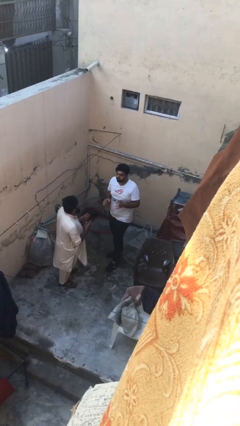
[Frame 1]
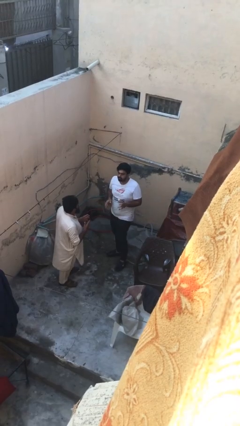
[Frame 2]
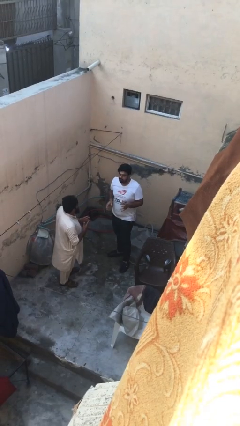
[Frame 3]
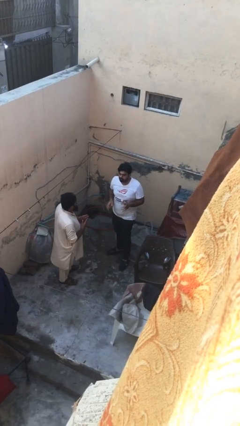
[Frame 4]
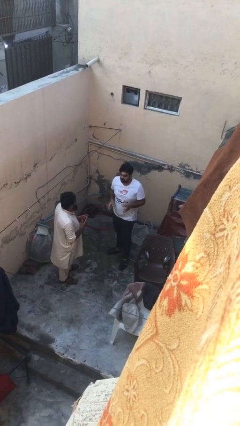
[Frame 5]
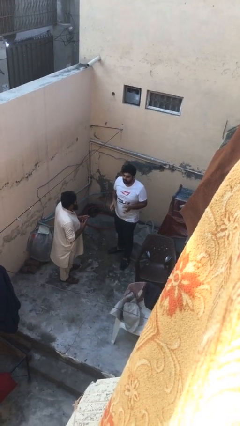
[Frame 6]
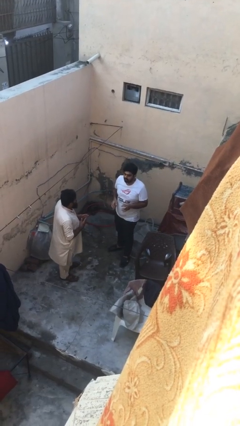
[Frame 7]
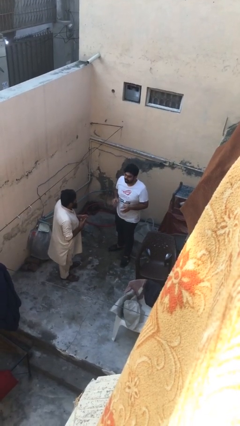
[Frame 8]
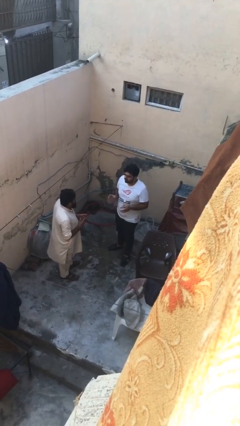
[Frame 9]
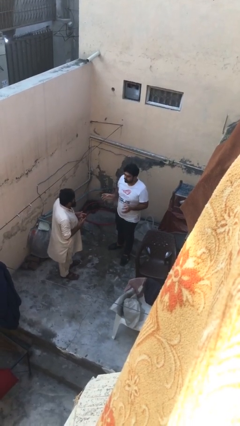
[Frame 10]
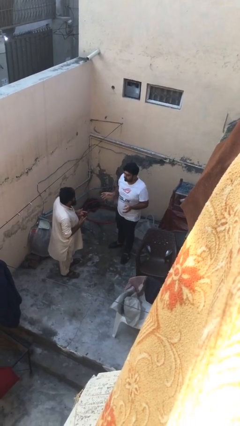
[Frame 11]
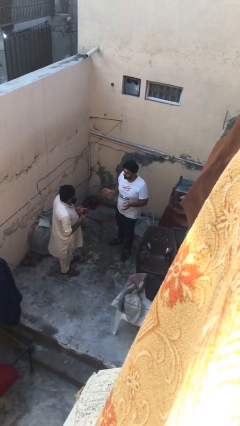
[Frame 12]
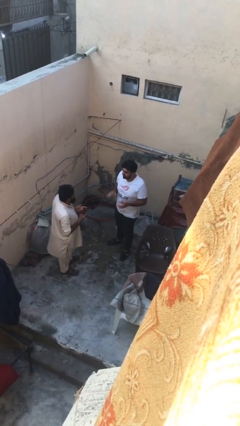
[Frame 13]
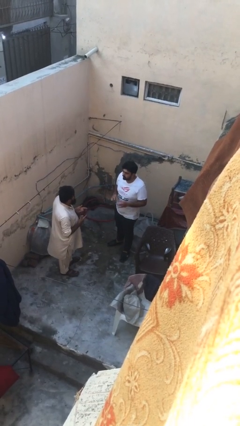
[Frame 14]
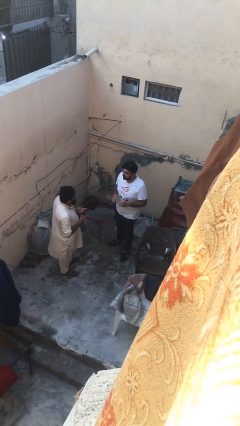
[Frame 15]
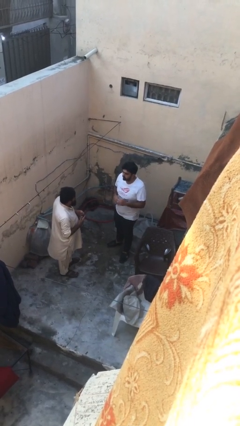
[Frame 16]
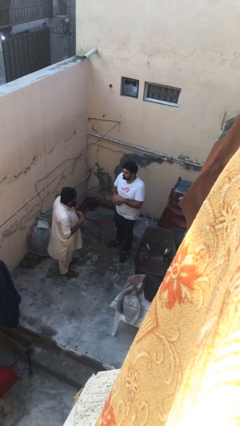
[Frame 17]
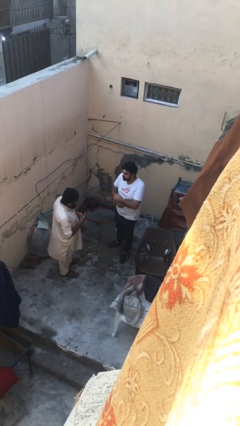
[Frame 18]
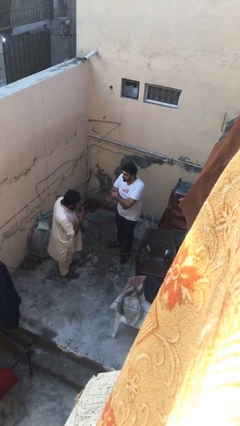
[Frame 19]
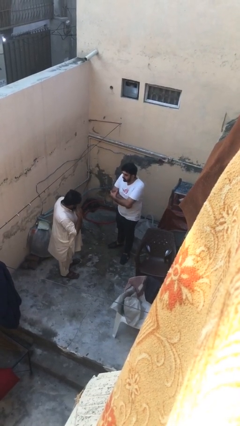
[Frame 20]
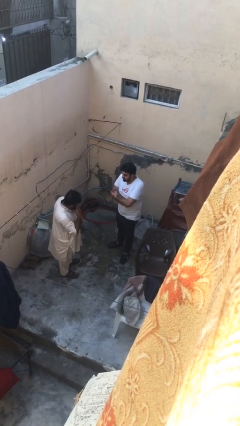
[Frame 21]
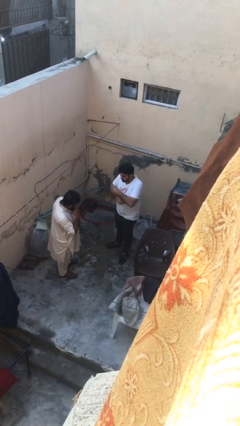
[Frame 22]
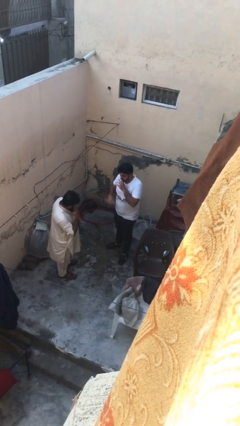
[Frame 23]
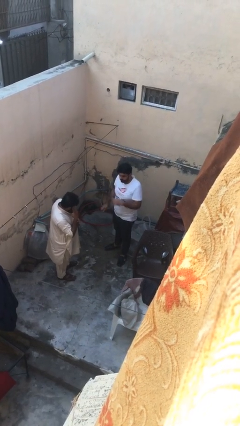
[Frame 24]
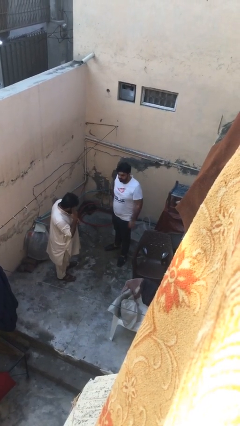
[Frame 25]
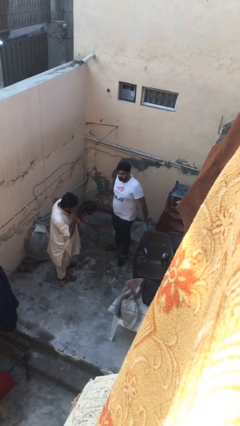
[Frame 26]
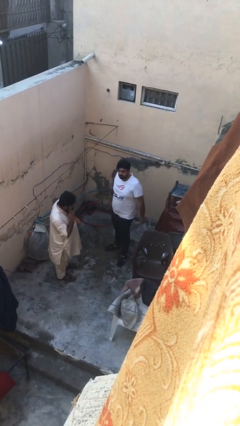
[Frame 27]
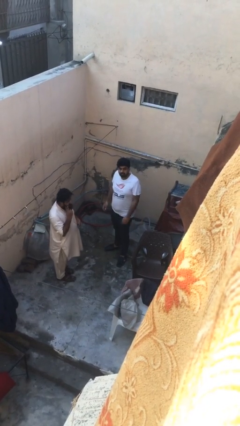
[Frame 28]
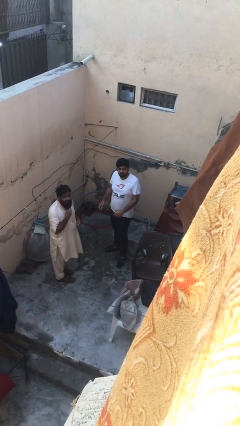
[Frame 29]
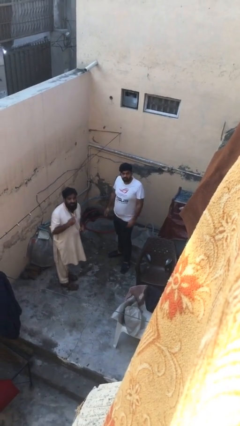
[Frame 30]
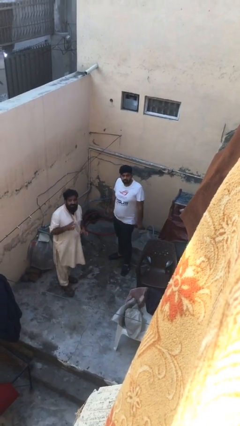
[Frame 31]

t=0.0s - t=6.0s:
person talks to person

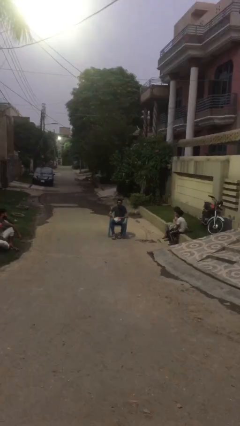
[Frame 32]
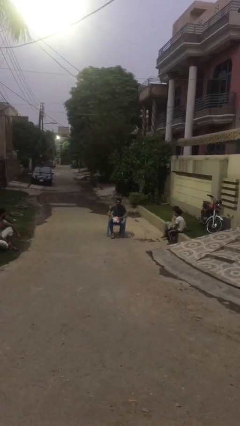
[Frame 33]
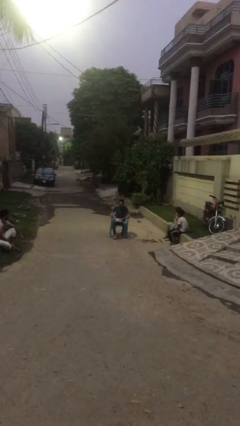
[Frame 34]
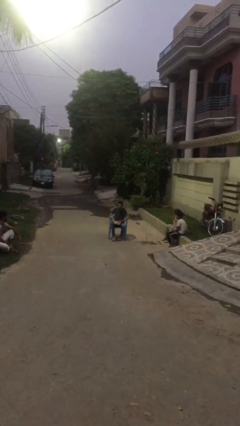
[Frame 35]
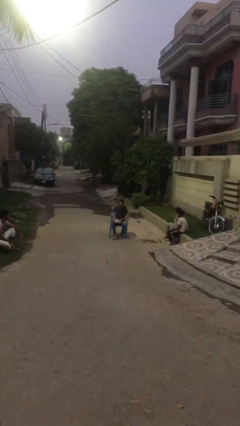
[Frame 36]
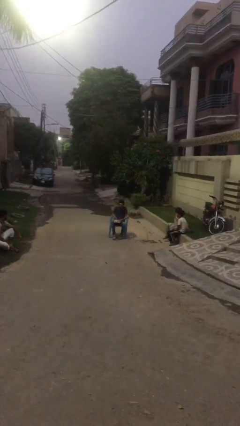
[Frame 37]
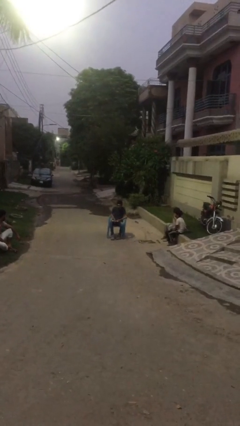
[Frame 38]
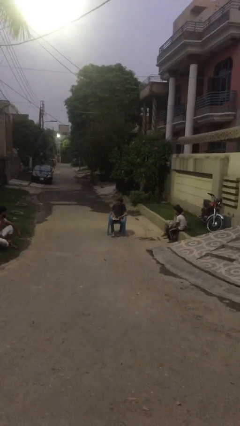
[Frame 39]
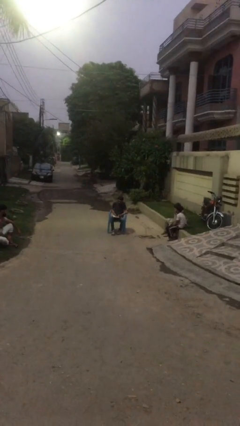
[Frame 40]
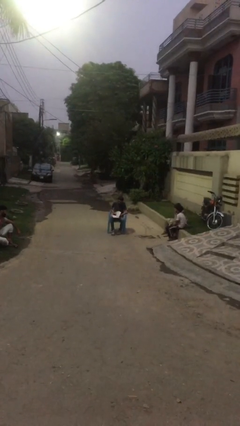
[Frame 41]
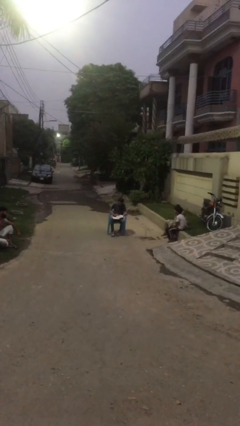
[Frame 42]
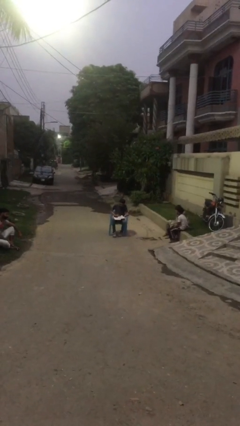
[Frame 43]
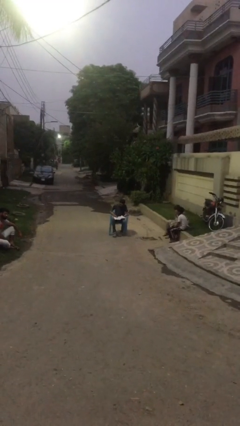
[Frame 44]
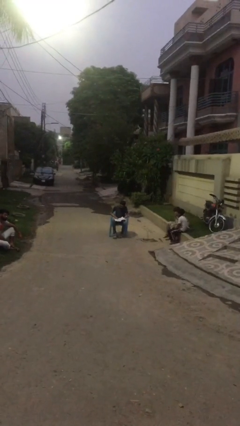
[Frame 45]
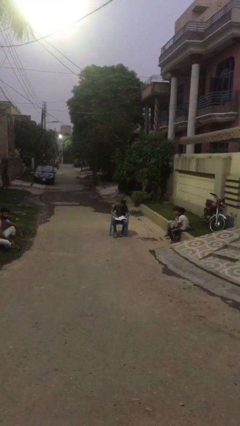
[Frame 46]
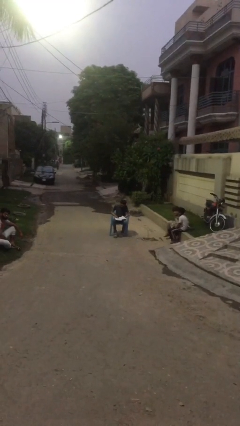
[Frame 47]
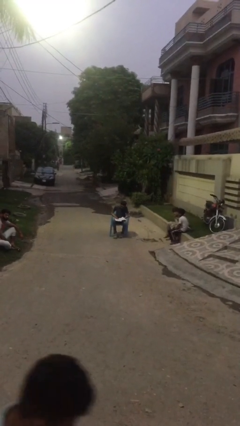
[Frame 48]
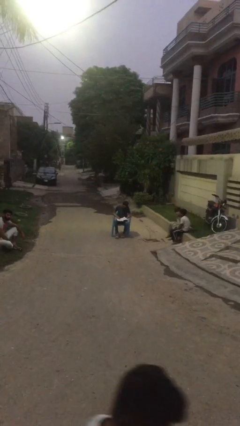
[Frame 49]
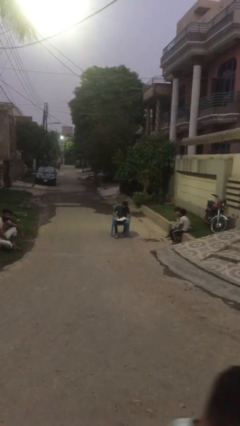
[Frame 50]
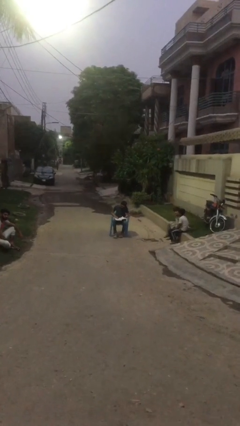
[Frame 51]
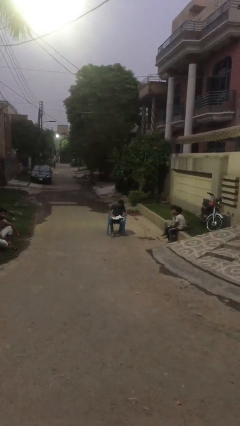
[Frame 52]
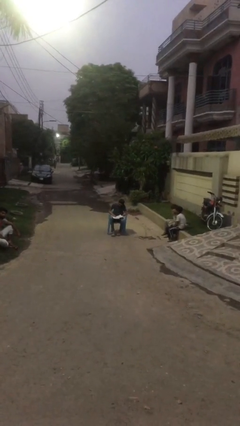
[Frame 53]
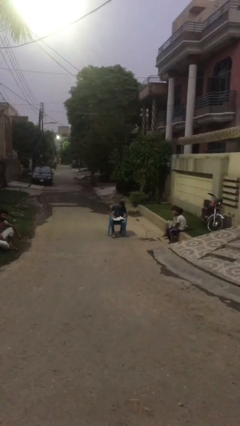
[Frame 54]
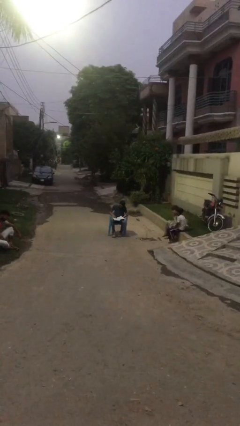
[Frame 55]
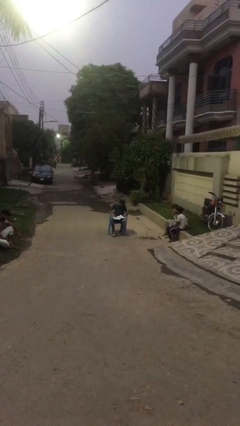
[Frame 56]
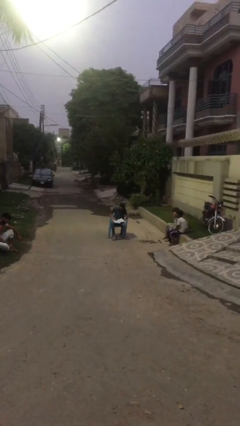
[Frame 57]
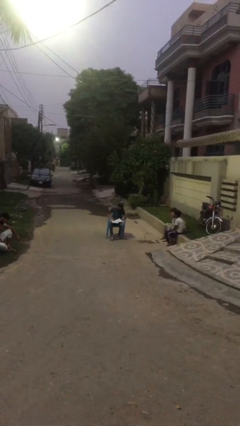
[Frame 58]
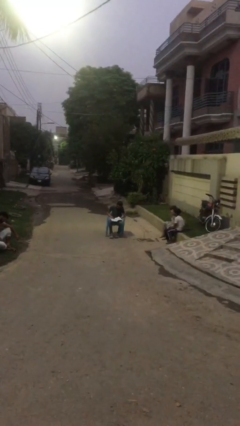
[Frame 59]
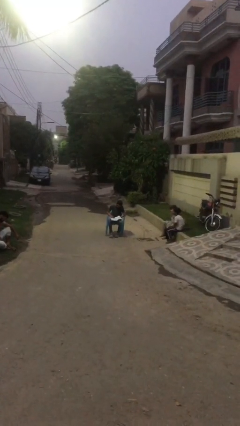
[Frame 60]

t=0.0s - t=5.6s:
person reads document

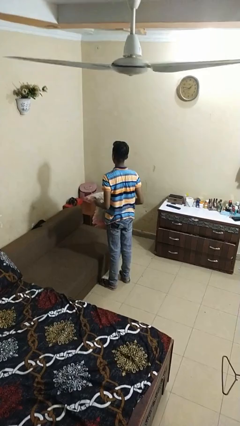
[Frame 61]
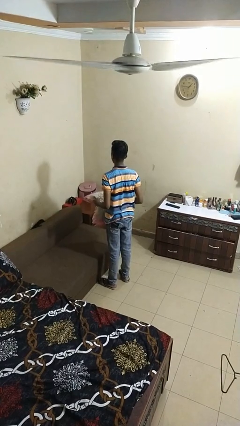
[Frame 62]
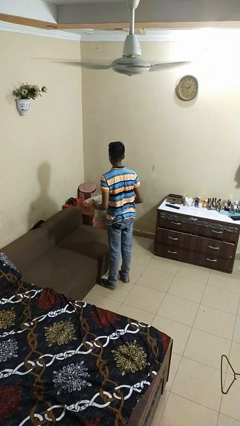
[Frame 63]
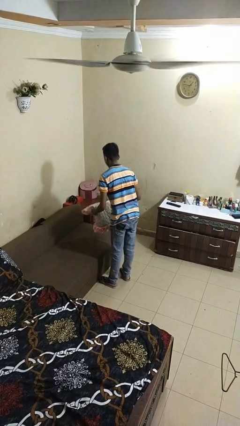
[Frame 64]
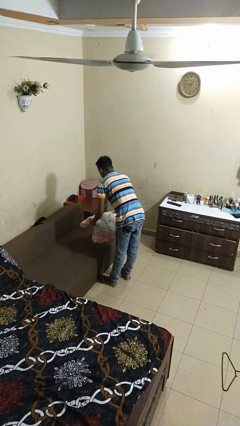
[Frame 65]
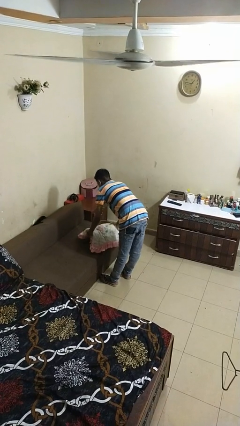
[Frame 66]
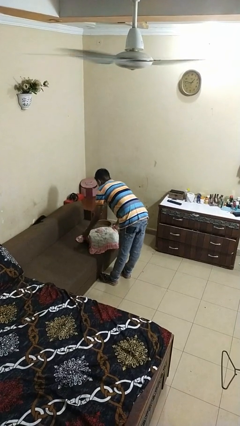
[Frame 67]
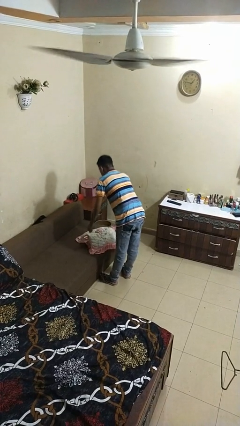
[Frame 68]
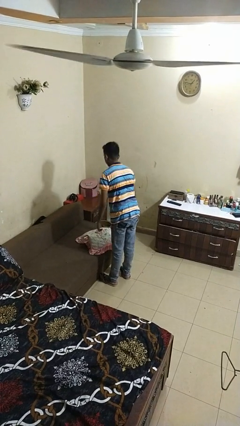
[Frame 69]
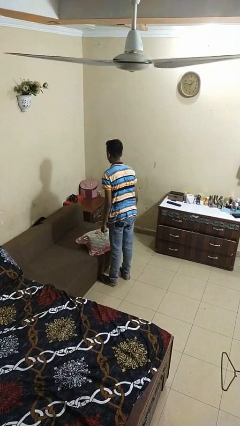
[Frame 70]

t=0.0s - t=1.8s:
person puts down object on couch

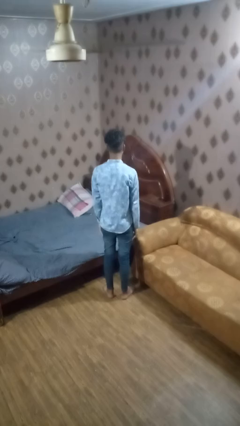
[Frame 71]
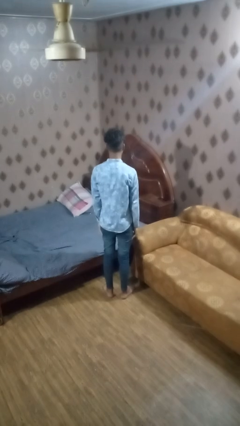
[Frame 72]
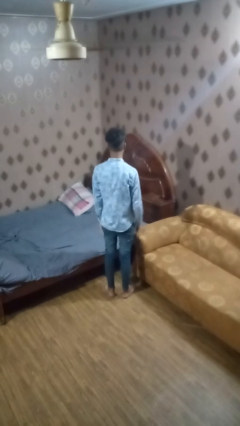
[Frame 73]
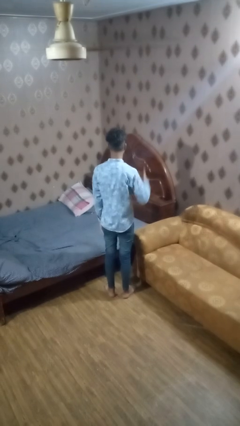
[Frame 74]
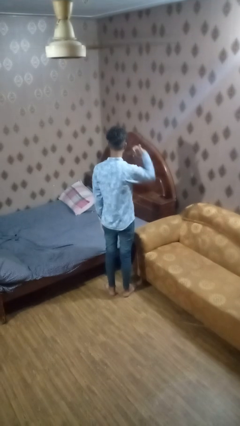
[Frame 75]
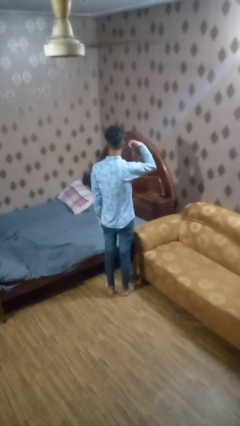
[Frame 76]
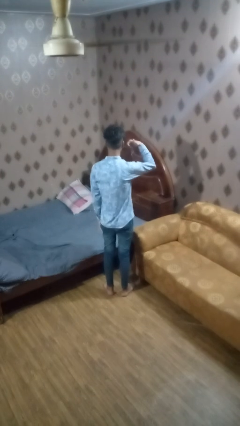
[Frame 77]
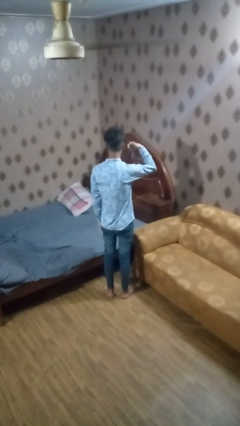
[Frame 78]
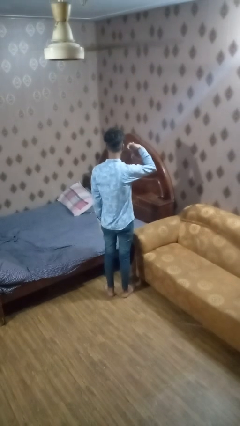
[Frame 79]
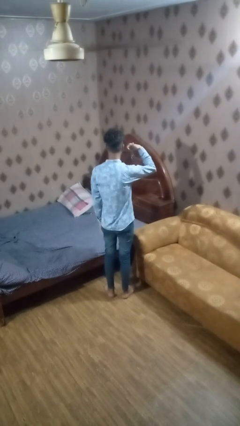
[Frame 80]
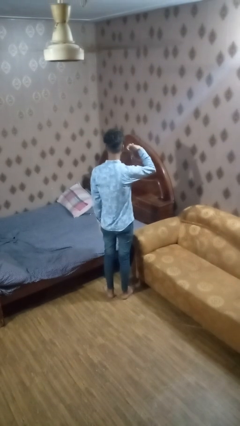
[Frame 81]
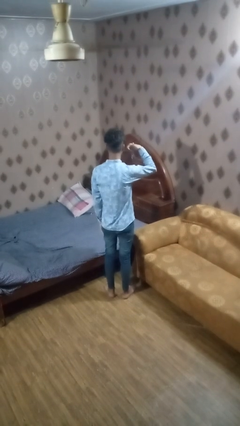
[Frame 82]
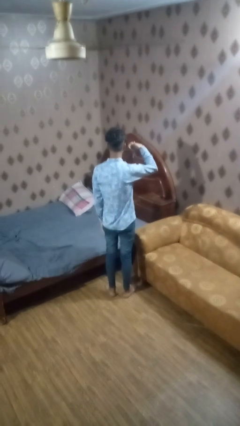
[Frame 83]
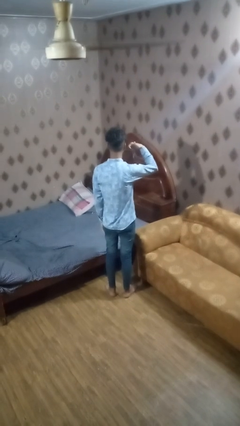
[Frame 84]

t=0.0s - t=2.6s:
person gestures call me

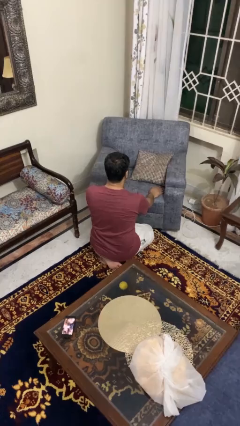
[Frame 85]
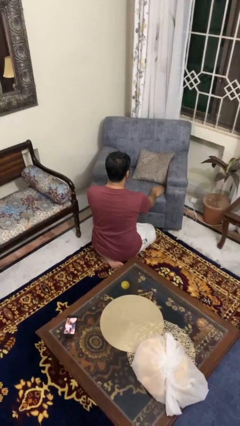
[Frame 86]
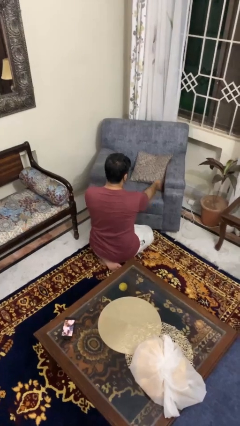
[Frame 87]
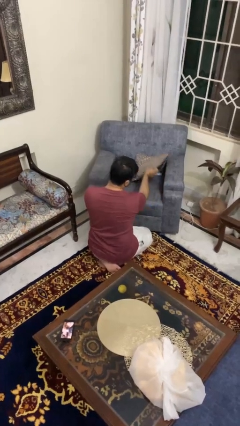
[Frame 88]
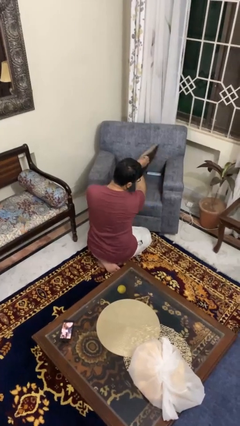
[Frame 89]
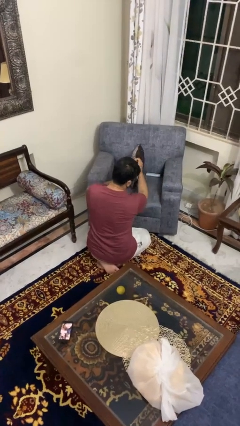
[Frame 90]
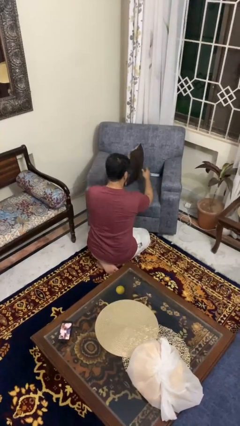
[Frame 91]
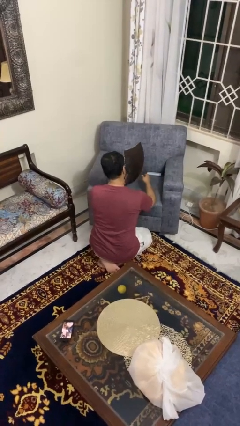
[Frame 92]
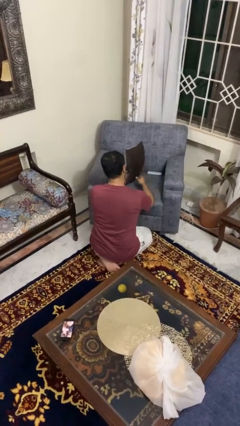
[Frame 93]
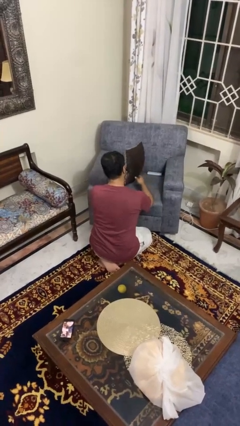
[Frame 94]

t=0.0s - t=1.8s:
person searches in couch
